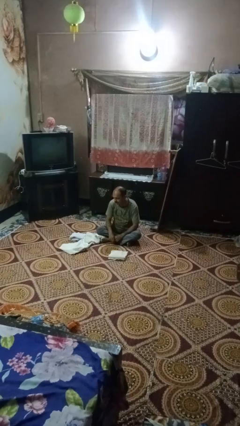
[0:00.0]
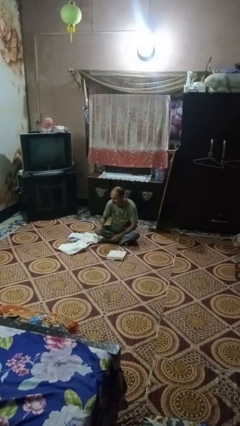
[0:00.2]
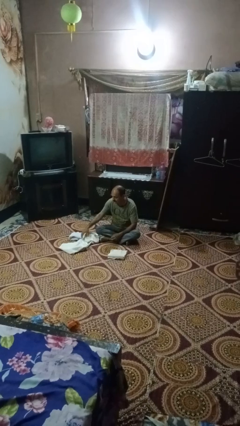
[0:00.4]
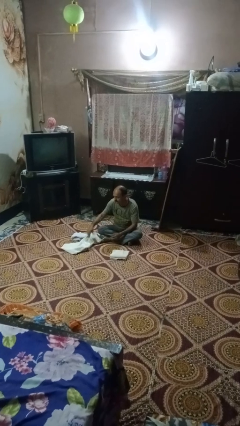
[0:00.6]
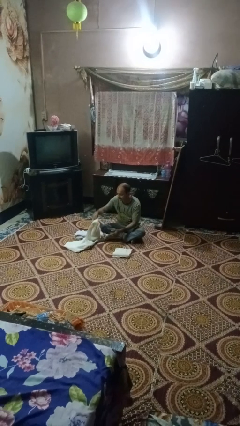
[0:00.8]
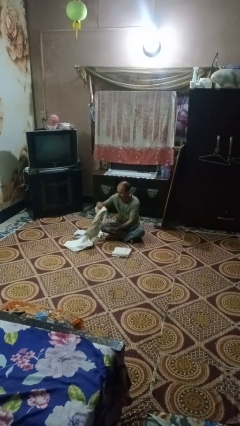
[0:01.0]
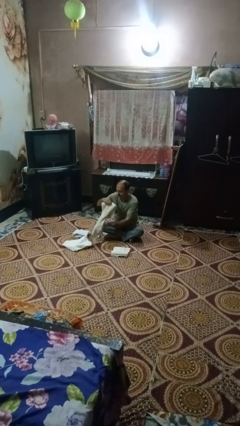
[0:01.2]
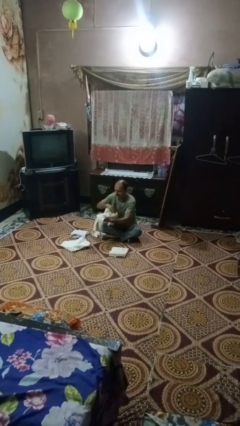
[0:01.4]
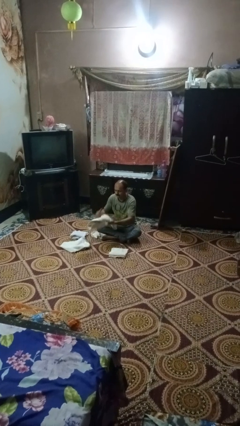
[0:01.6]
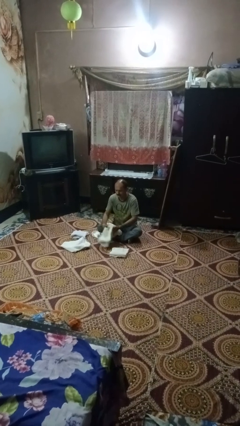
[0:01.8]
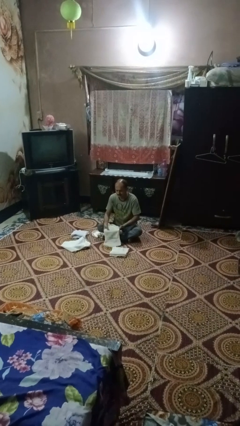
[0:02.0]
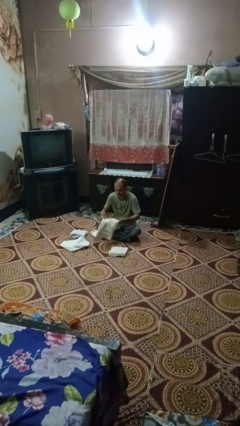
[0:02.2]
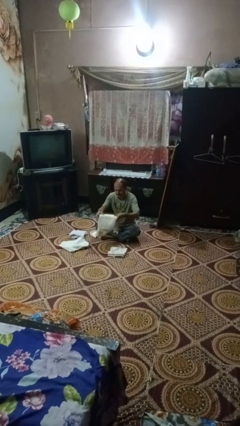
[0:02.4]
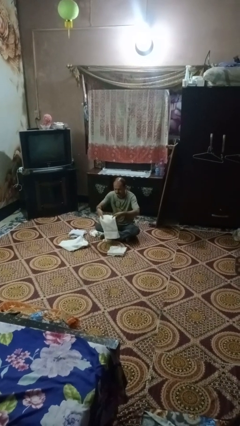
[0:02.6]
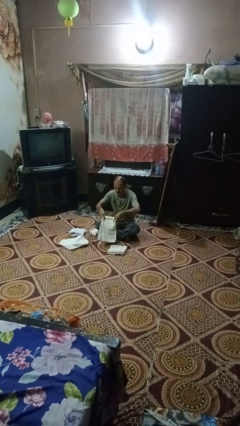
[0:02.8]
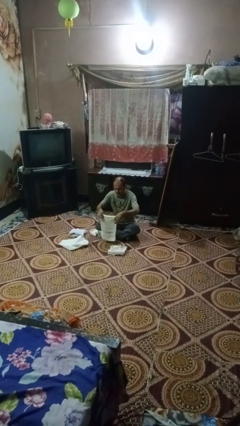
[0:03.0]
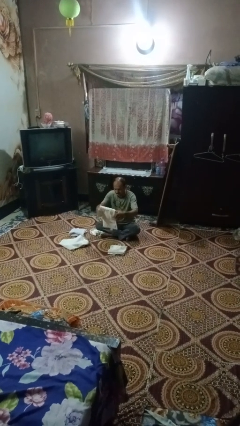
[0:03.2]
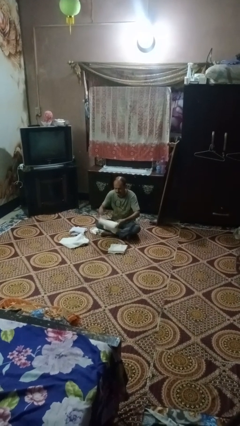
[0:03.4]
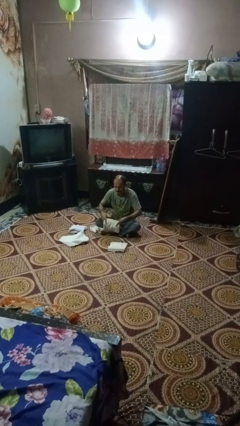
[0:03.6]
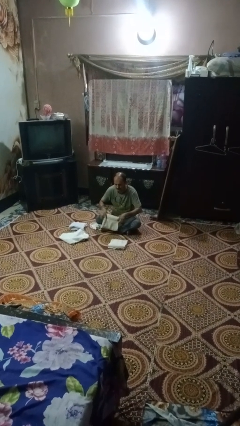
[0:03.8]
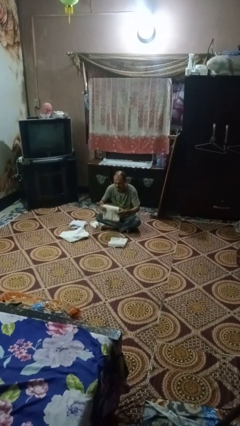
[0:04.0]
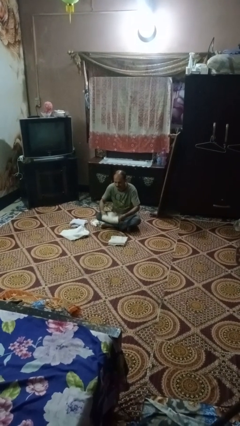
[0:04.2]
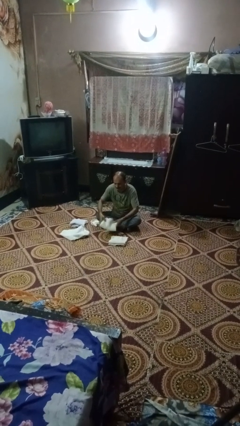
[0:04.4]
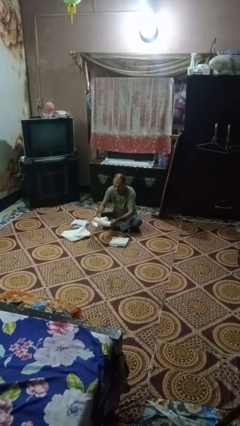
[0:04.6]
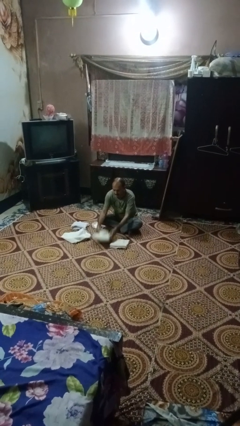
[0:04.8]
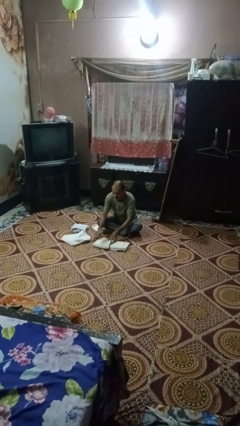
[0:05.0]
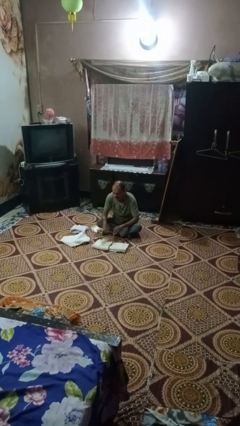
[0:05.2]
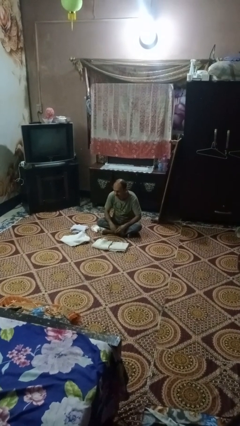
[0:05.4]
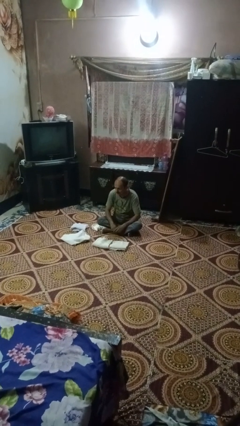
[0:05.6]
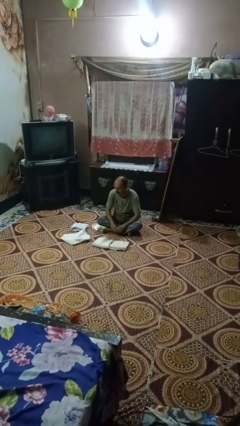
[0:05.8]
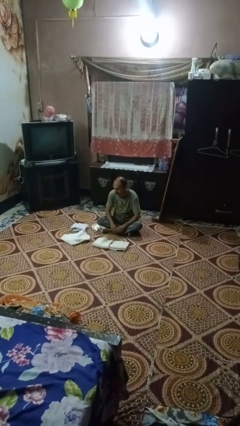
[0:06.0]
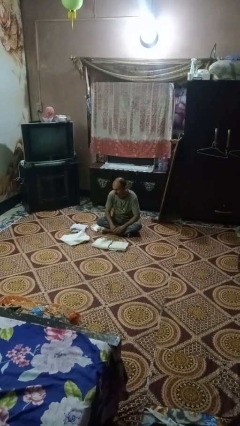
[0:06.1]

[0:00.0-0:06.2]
person folds towel

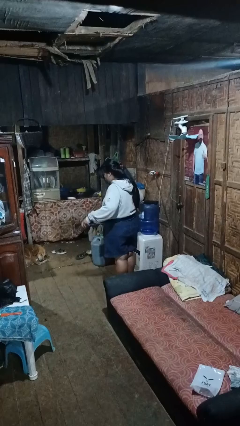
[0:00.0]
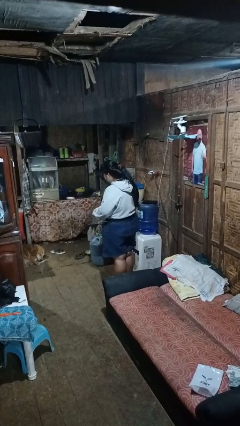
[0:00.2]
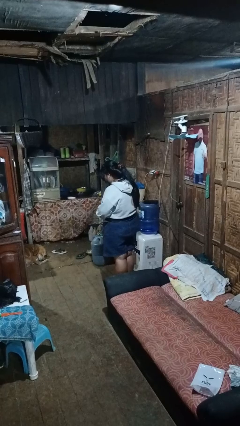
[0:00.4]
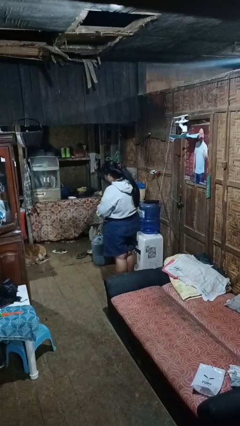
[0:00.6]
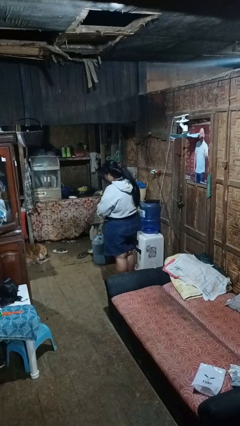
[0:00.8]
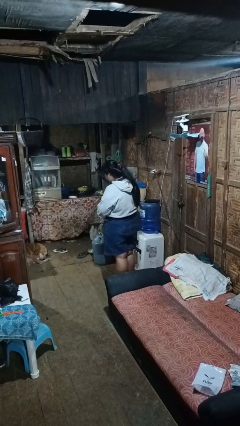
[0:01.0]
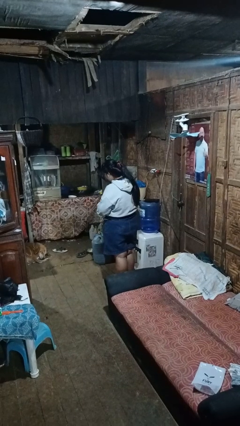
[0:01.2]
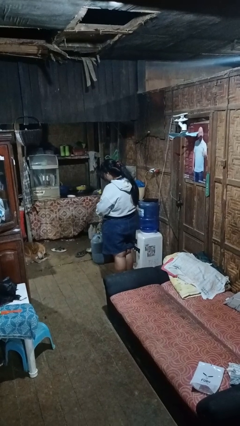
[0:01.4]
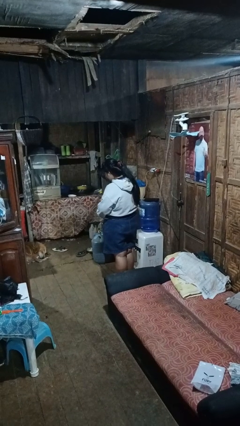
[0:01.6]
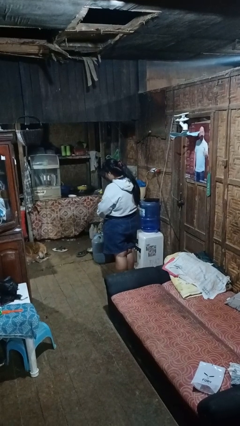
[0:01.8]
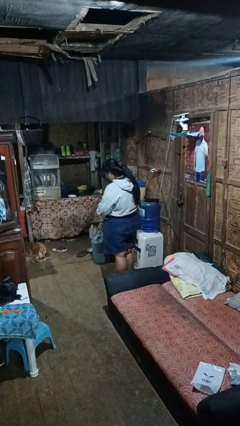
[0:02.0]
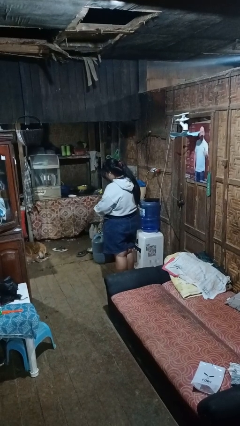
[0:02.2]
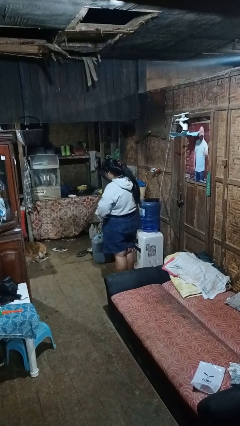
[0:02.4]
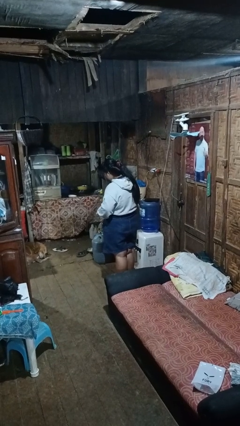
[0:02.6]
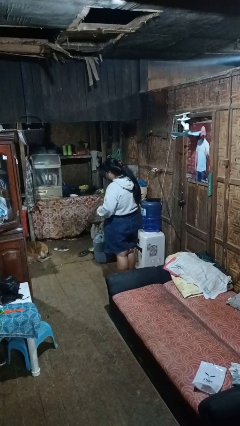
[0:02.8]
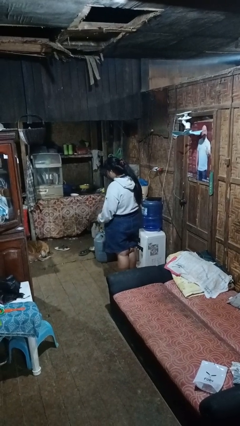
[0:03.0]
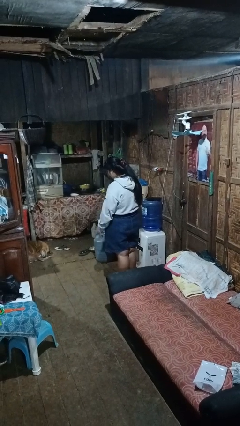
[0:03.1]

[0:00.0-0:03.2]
person puts on belt

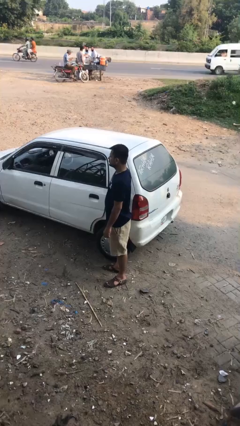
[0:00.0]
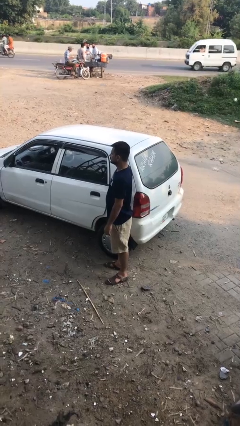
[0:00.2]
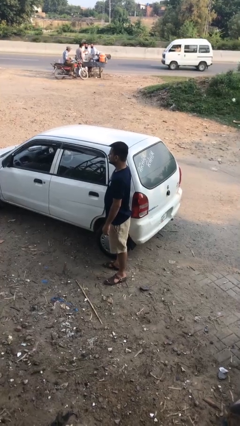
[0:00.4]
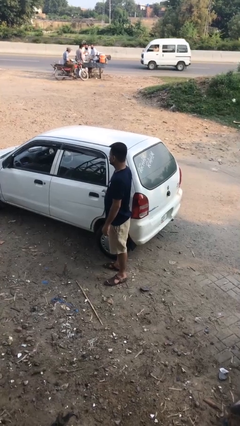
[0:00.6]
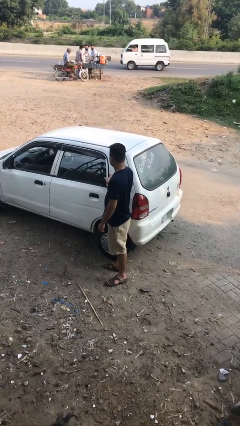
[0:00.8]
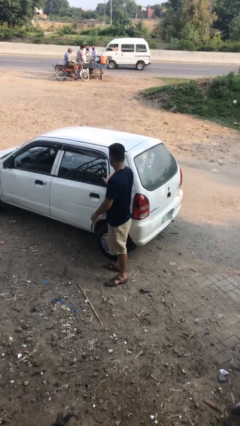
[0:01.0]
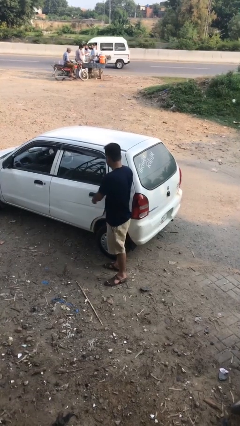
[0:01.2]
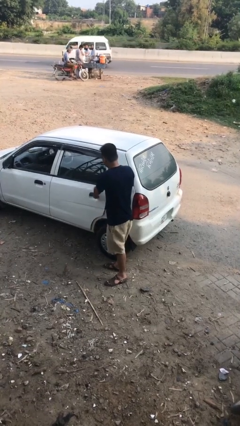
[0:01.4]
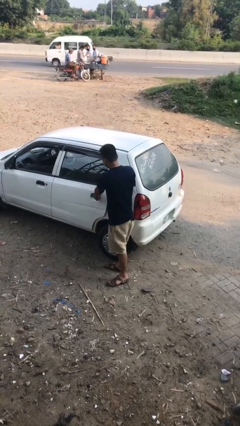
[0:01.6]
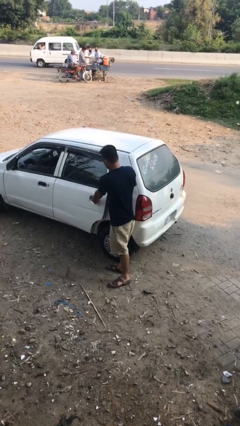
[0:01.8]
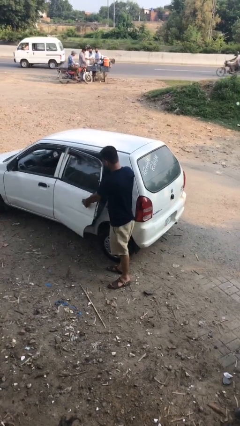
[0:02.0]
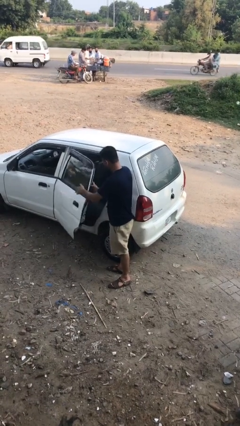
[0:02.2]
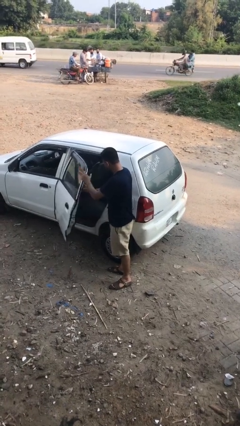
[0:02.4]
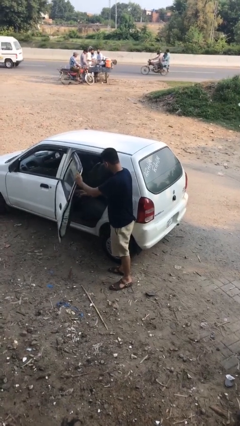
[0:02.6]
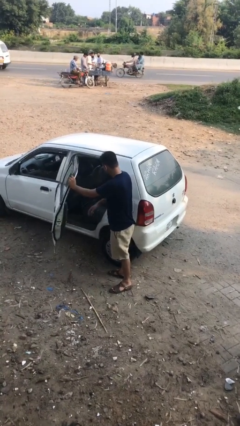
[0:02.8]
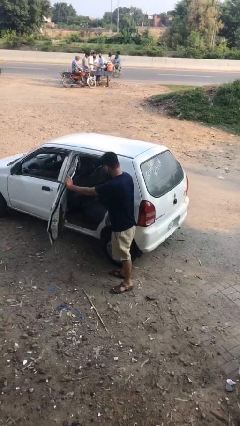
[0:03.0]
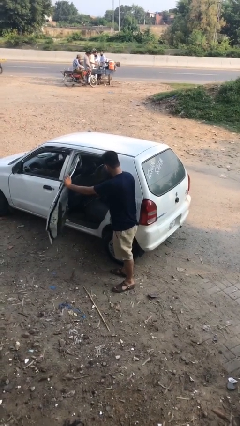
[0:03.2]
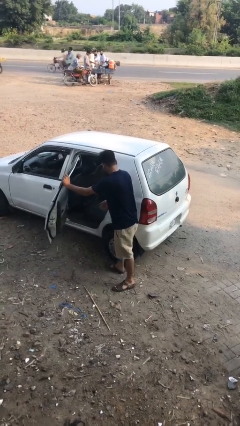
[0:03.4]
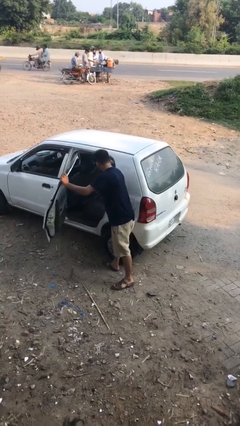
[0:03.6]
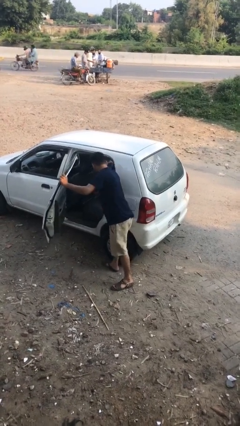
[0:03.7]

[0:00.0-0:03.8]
person opens car door

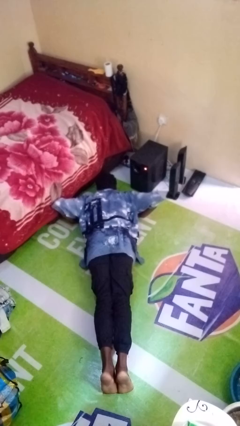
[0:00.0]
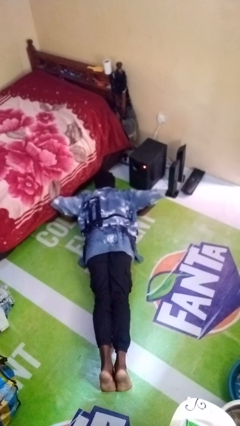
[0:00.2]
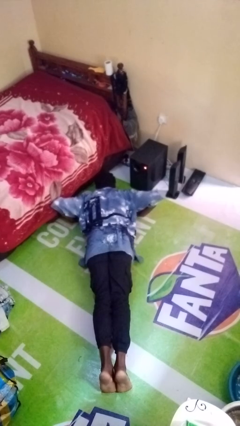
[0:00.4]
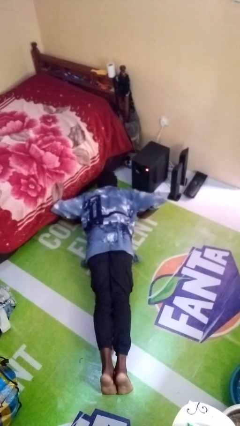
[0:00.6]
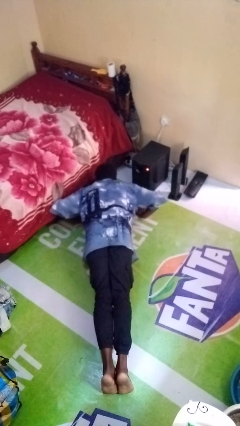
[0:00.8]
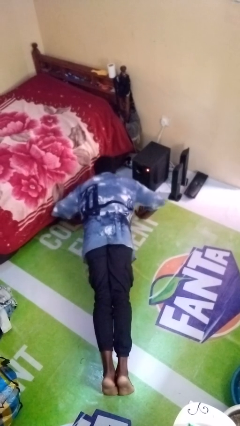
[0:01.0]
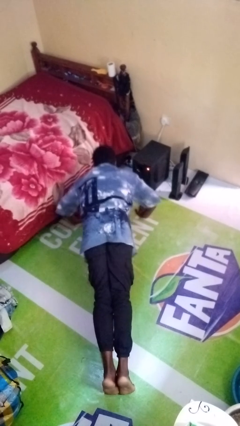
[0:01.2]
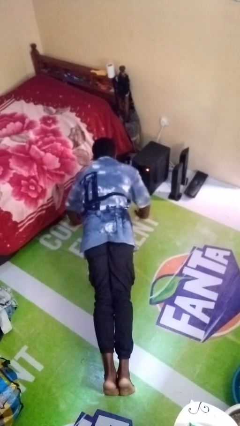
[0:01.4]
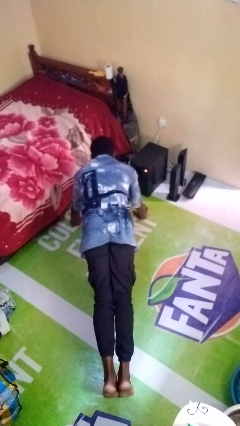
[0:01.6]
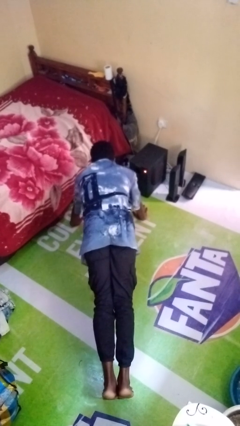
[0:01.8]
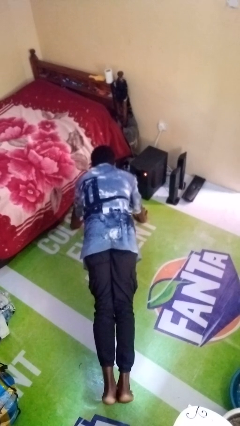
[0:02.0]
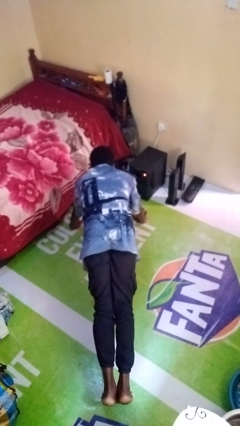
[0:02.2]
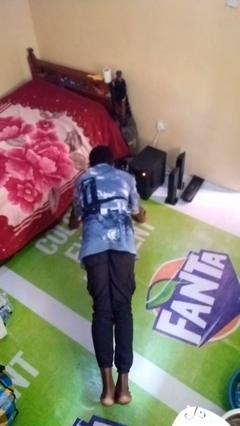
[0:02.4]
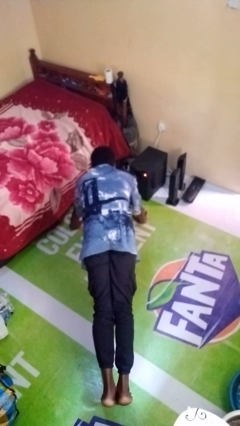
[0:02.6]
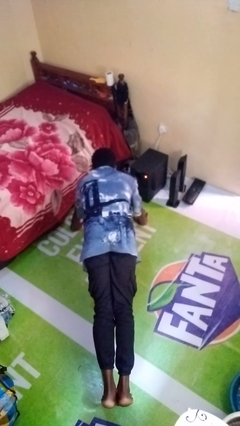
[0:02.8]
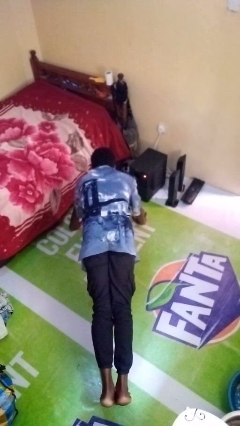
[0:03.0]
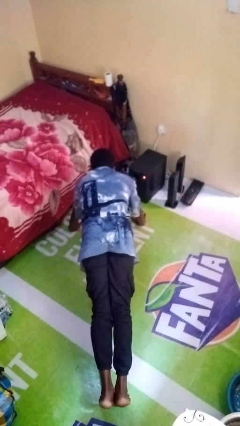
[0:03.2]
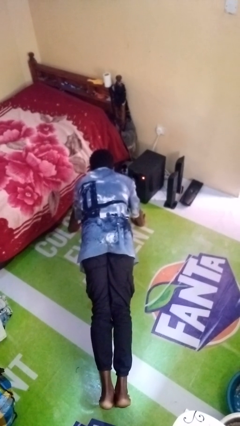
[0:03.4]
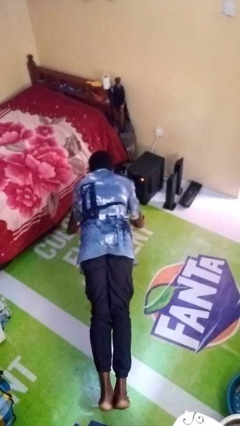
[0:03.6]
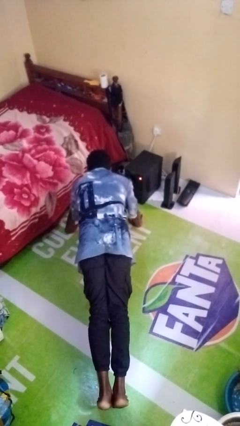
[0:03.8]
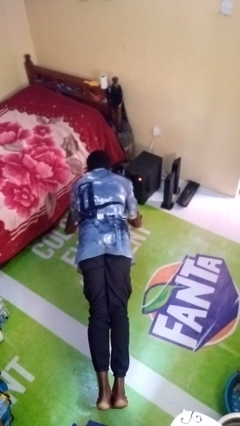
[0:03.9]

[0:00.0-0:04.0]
person exercises with pushup

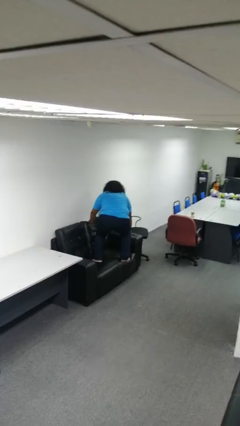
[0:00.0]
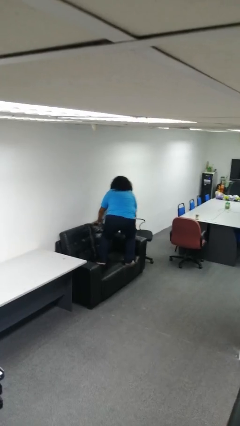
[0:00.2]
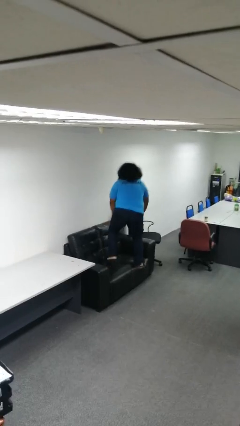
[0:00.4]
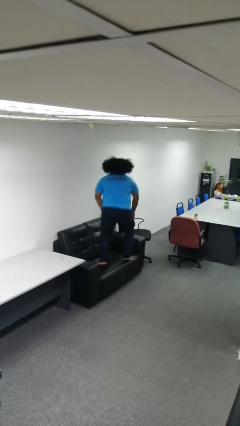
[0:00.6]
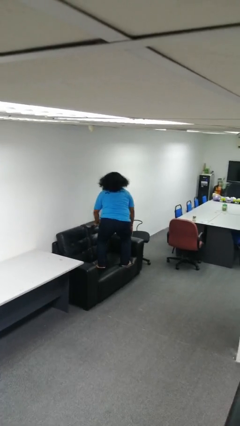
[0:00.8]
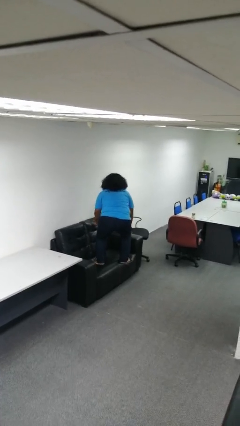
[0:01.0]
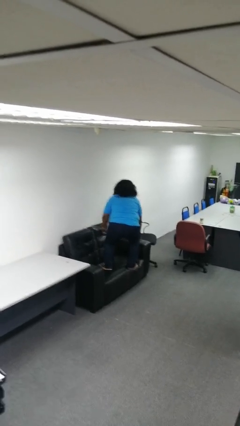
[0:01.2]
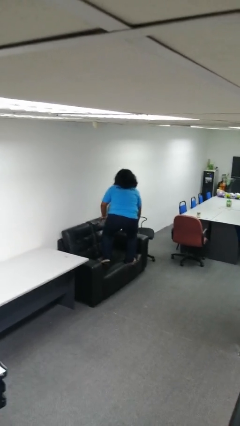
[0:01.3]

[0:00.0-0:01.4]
person jumps on couch
